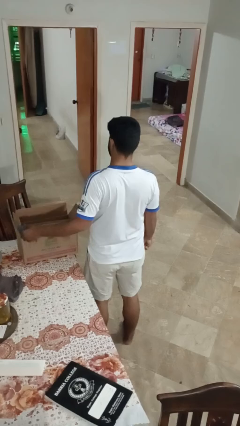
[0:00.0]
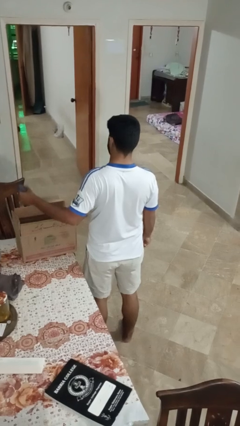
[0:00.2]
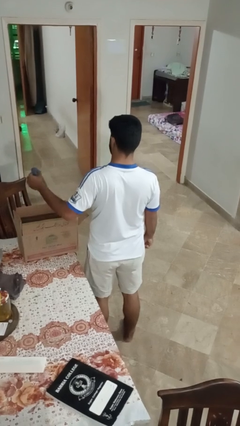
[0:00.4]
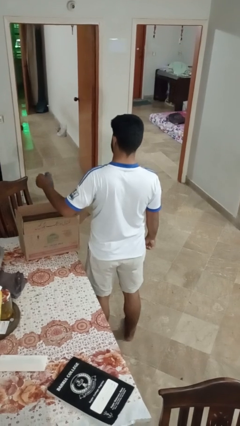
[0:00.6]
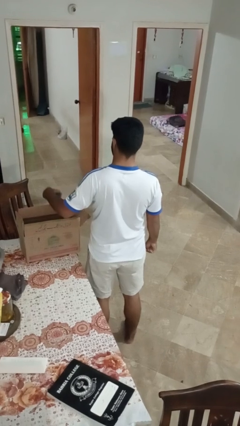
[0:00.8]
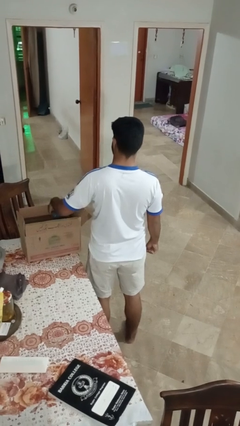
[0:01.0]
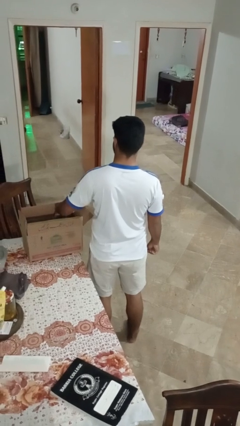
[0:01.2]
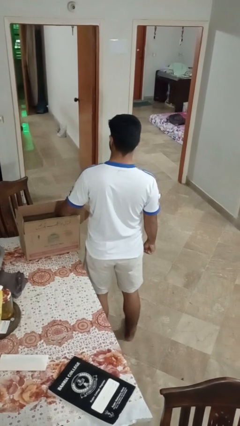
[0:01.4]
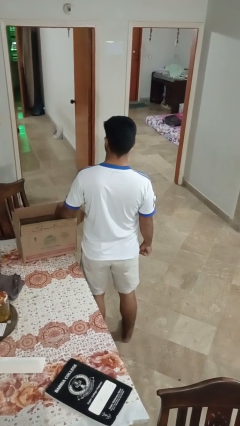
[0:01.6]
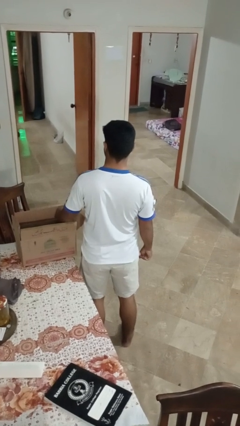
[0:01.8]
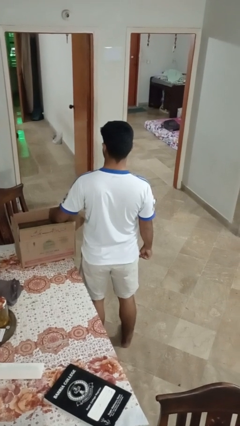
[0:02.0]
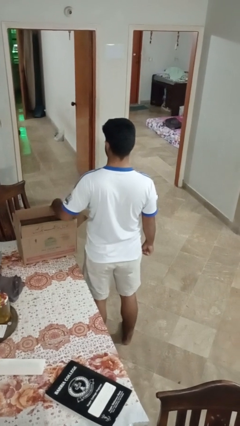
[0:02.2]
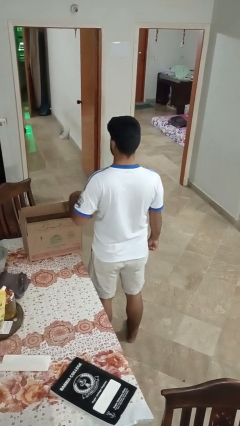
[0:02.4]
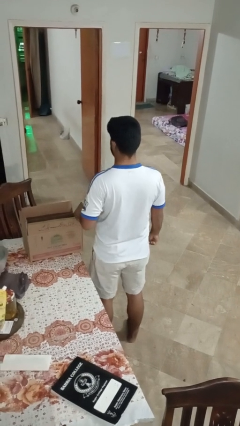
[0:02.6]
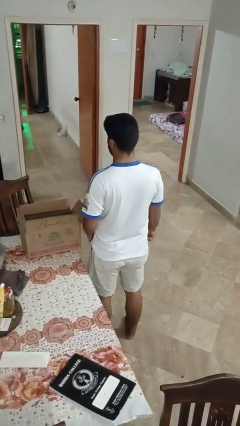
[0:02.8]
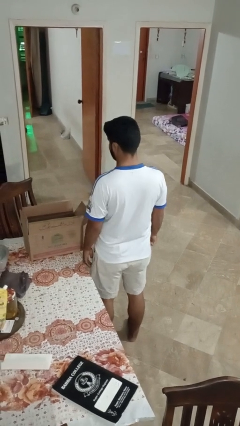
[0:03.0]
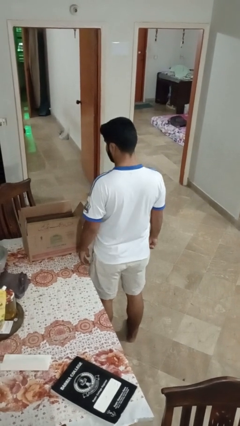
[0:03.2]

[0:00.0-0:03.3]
person puts object into box

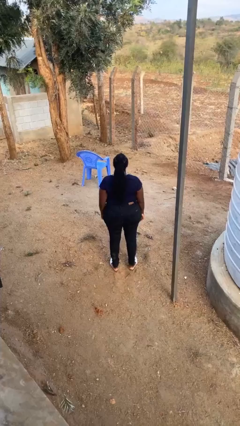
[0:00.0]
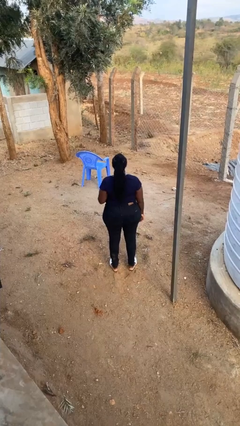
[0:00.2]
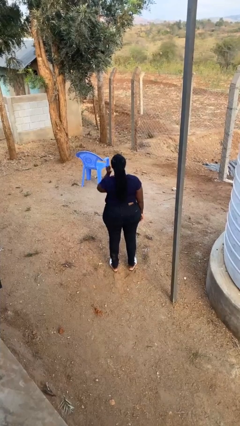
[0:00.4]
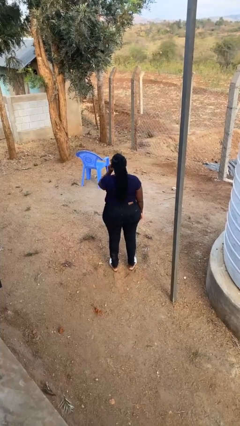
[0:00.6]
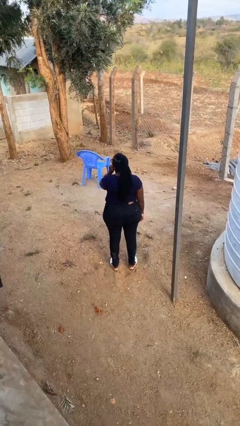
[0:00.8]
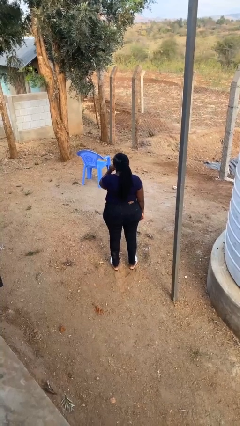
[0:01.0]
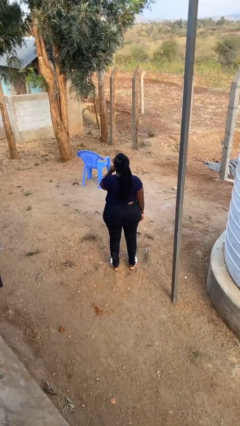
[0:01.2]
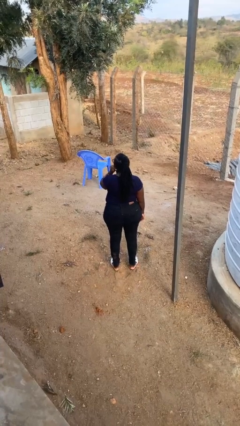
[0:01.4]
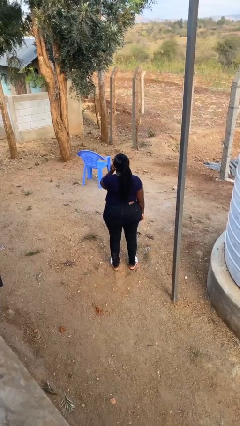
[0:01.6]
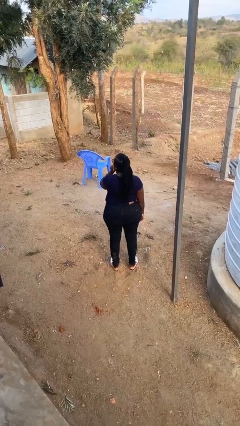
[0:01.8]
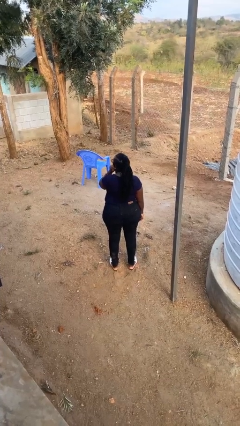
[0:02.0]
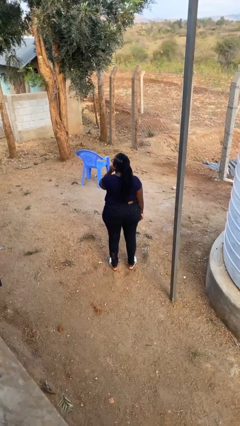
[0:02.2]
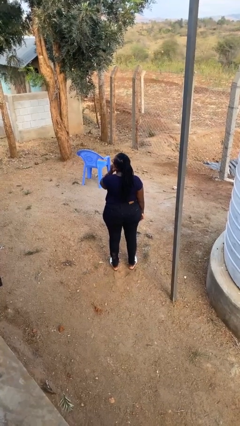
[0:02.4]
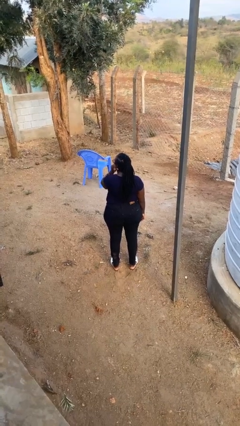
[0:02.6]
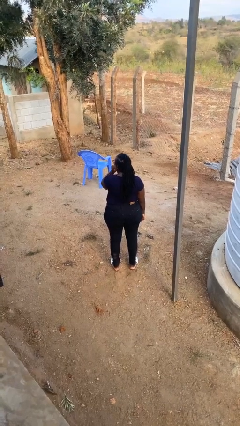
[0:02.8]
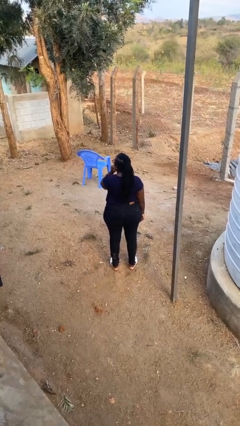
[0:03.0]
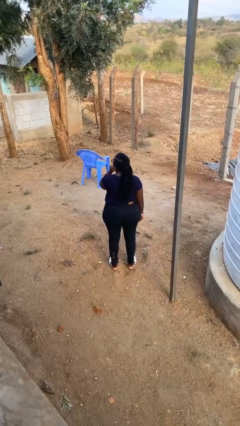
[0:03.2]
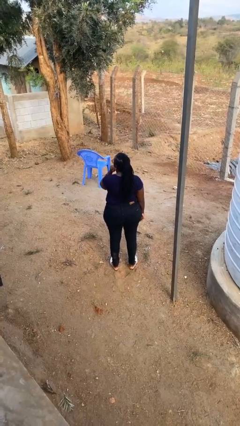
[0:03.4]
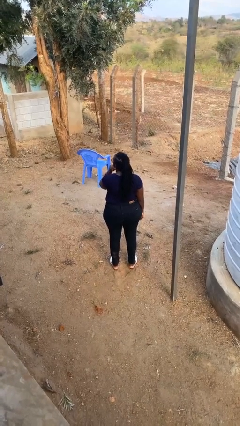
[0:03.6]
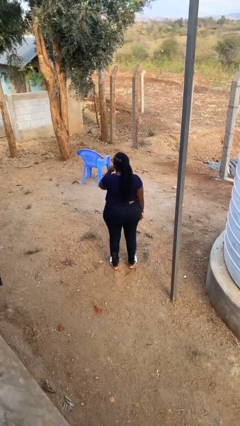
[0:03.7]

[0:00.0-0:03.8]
person touches earlobe

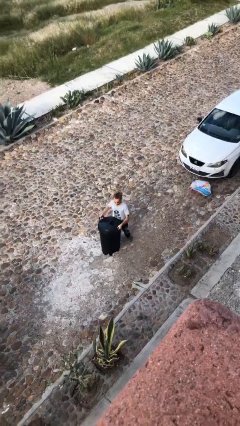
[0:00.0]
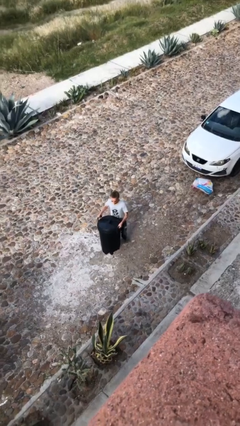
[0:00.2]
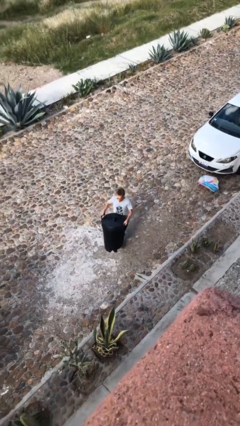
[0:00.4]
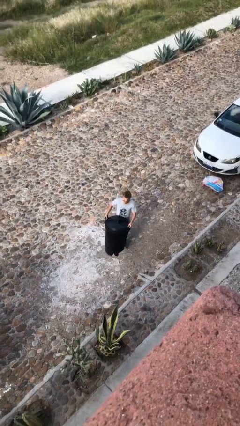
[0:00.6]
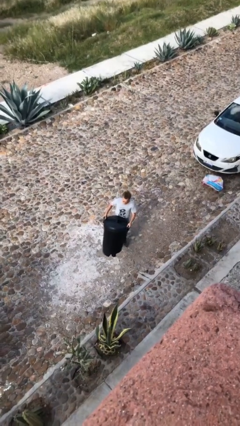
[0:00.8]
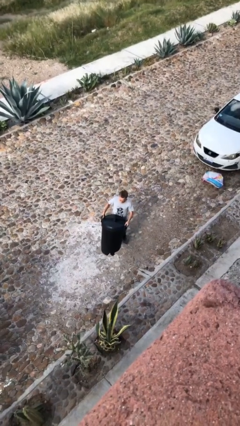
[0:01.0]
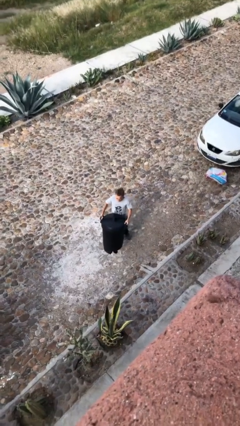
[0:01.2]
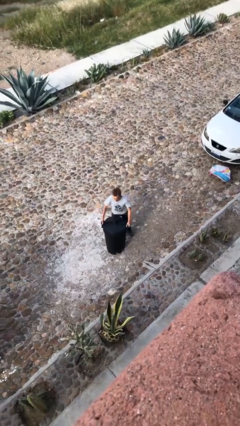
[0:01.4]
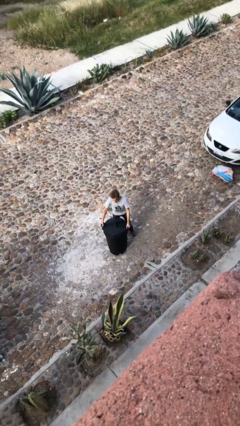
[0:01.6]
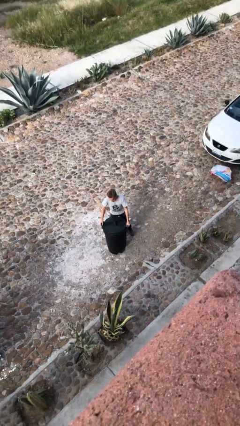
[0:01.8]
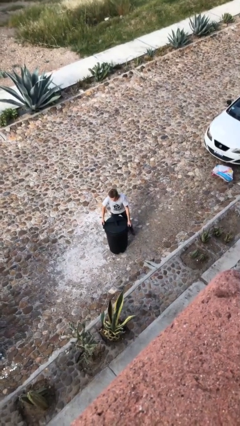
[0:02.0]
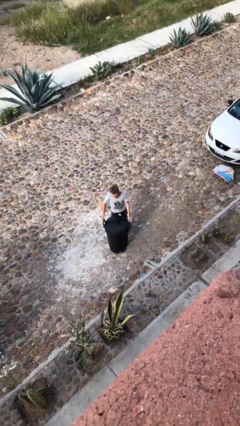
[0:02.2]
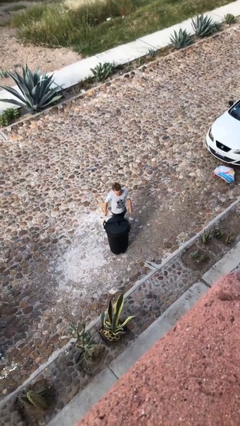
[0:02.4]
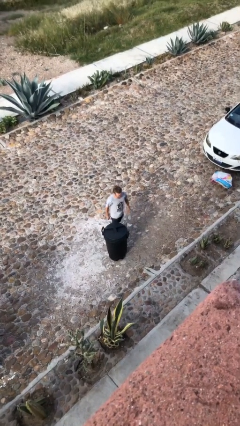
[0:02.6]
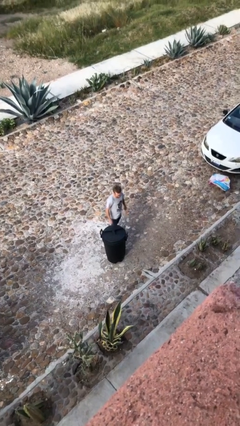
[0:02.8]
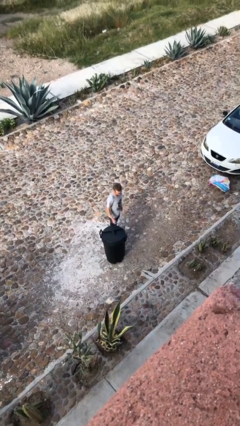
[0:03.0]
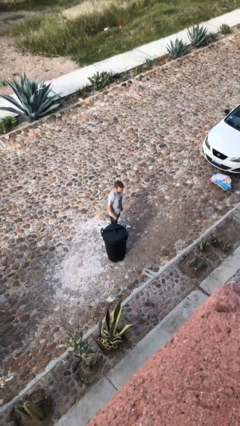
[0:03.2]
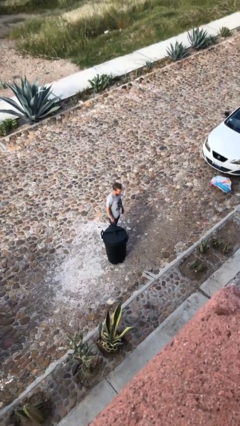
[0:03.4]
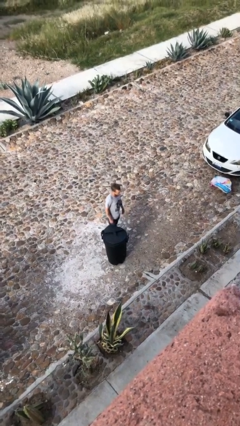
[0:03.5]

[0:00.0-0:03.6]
person puts down object on floor

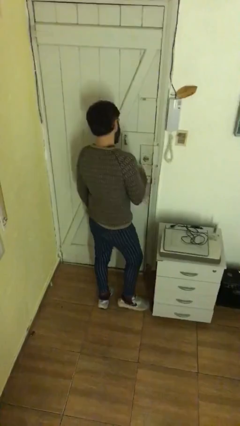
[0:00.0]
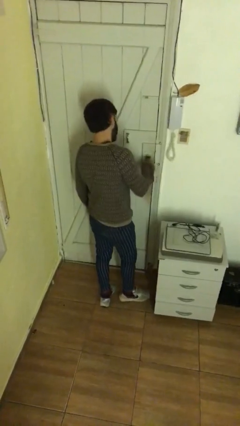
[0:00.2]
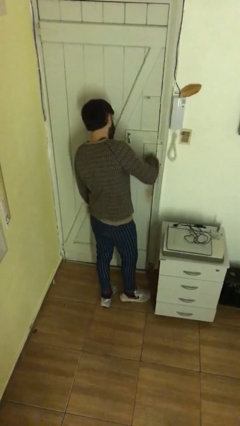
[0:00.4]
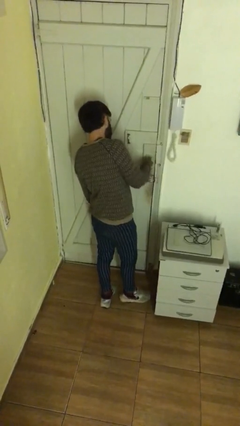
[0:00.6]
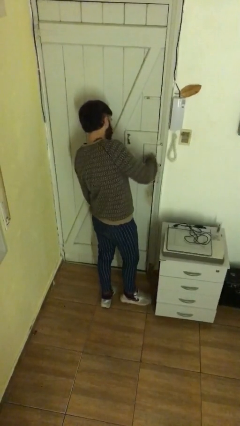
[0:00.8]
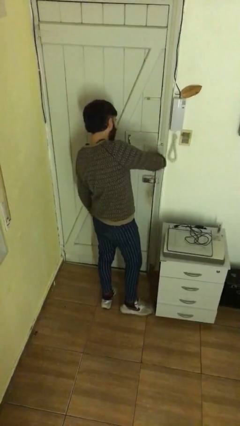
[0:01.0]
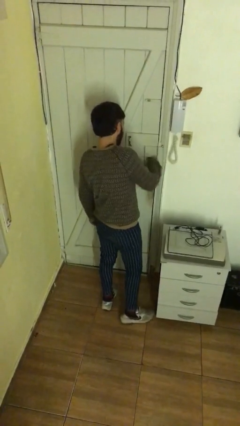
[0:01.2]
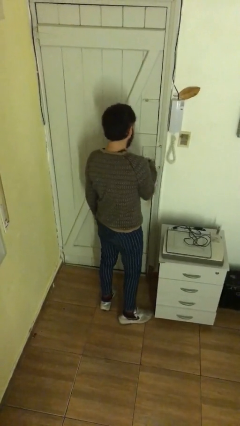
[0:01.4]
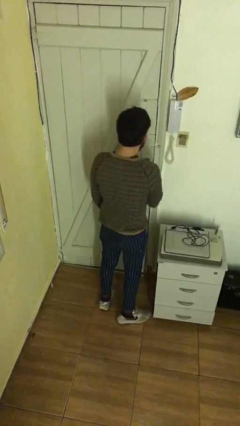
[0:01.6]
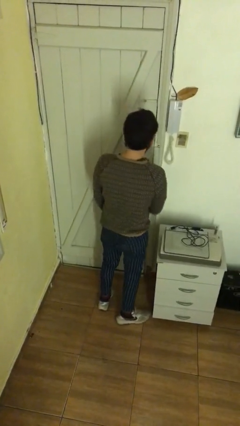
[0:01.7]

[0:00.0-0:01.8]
person locks door with keys

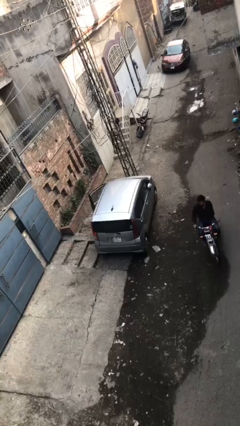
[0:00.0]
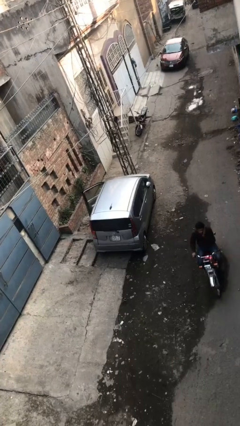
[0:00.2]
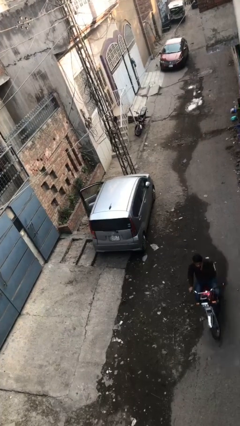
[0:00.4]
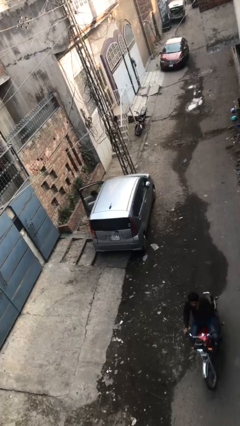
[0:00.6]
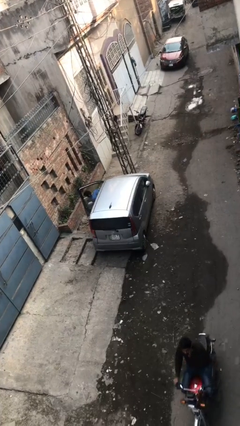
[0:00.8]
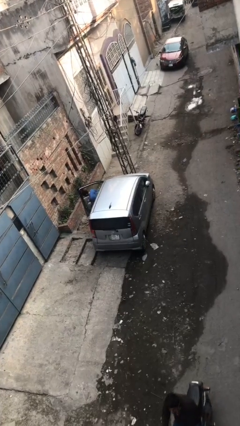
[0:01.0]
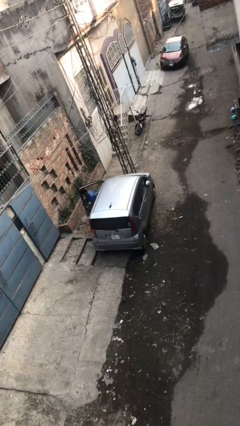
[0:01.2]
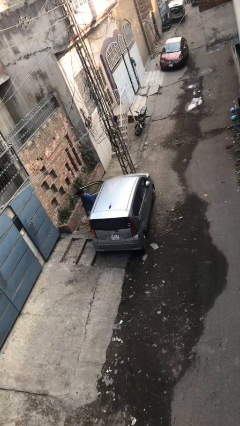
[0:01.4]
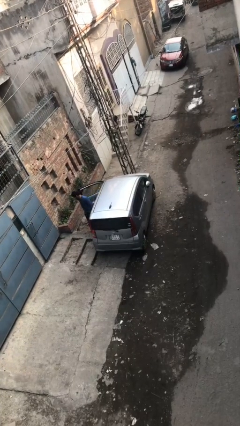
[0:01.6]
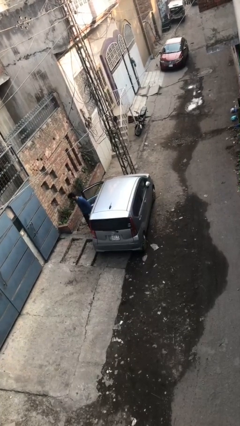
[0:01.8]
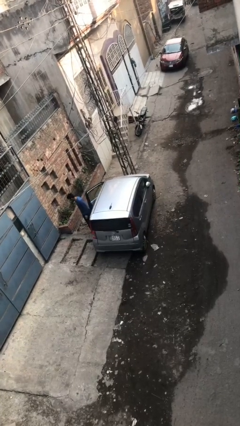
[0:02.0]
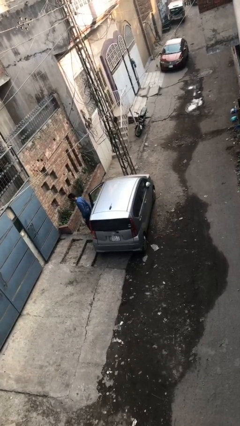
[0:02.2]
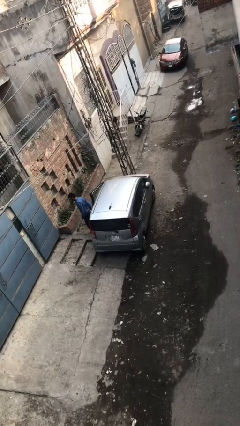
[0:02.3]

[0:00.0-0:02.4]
car drops off person

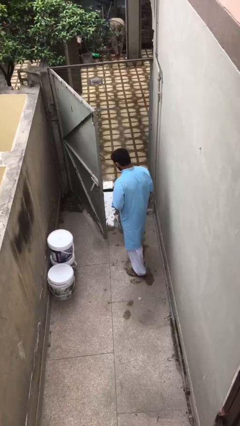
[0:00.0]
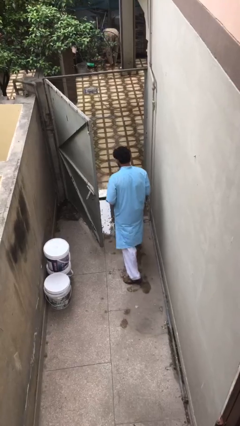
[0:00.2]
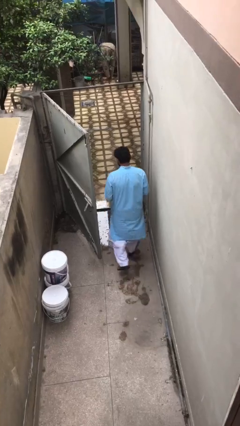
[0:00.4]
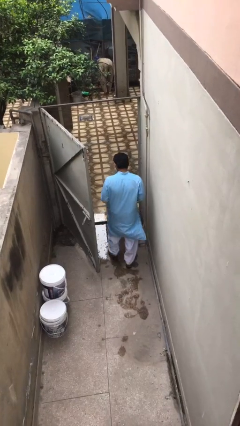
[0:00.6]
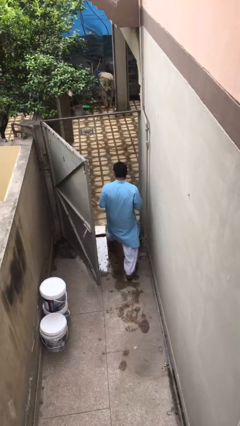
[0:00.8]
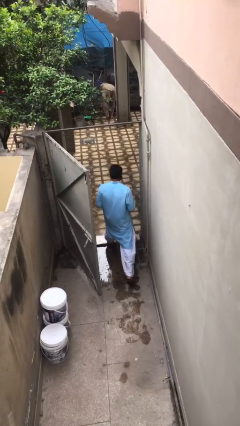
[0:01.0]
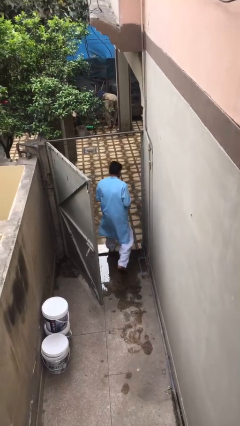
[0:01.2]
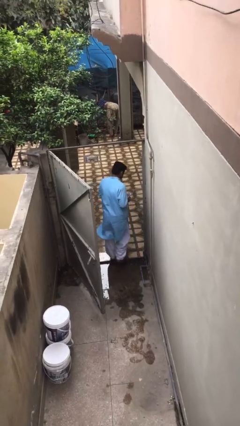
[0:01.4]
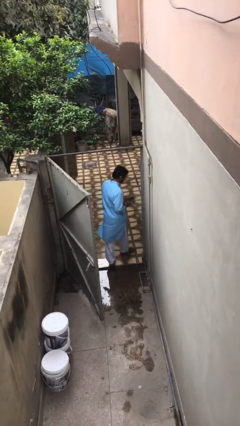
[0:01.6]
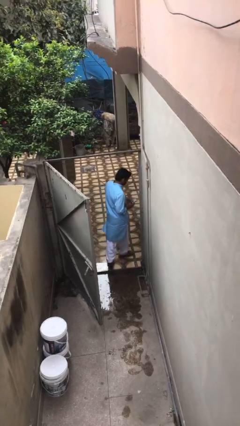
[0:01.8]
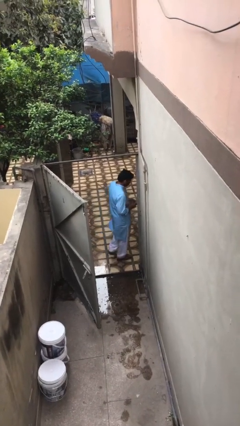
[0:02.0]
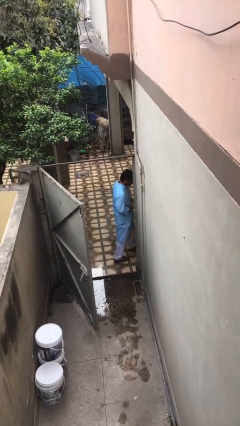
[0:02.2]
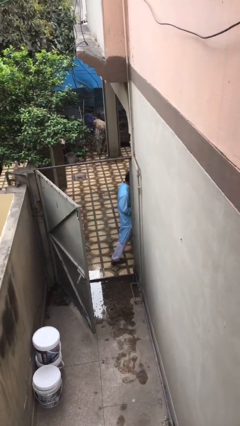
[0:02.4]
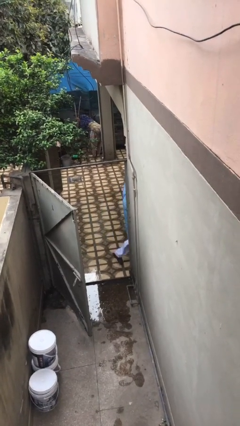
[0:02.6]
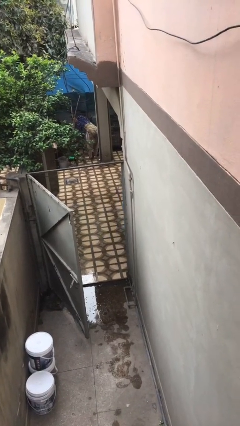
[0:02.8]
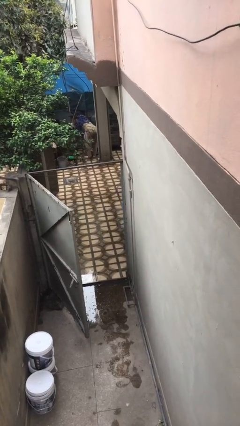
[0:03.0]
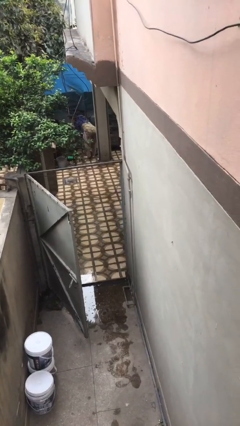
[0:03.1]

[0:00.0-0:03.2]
person exits scene through structure
